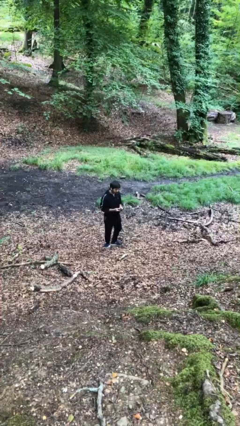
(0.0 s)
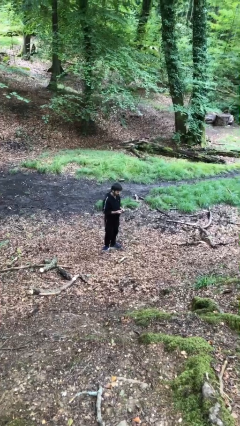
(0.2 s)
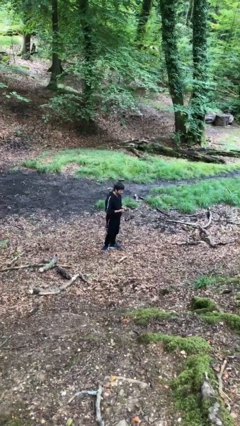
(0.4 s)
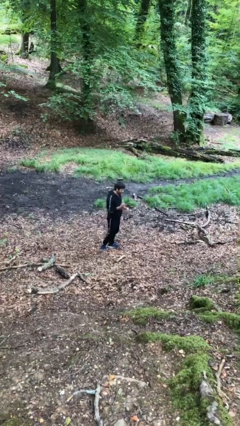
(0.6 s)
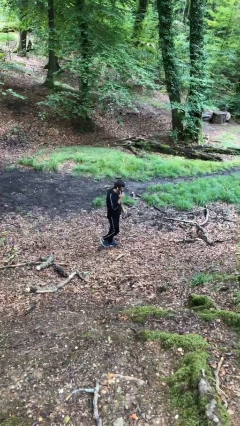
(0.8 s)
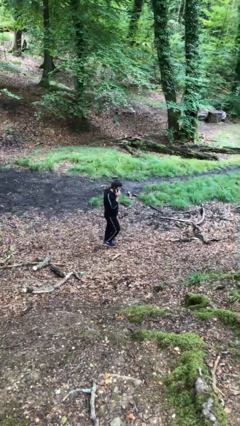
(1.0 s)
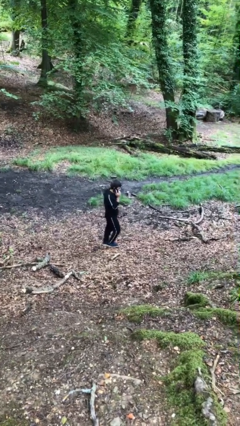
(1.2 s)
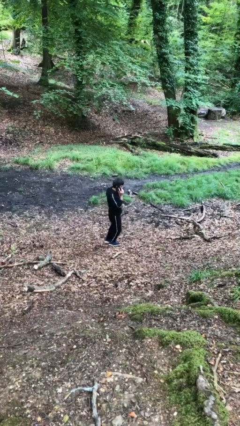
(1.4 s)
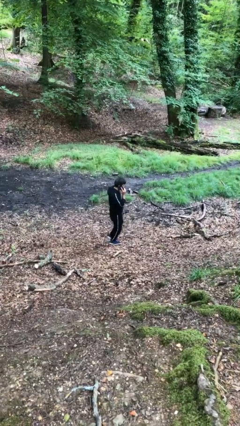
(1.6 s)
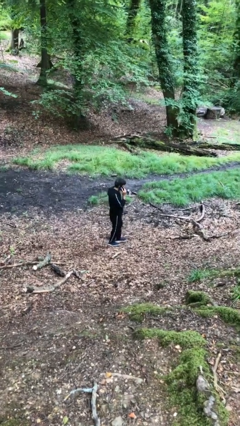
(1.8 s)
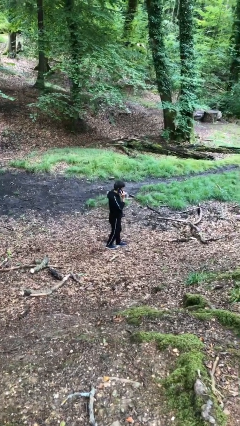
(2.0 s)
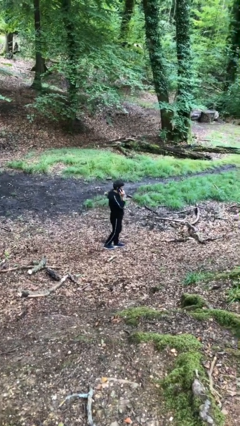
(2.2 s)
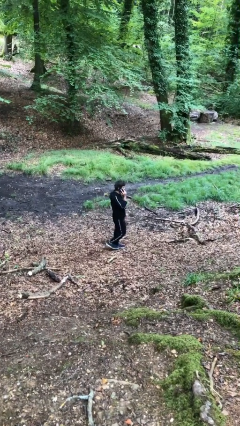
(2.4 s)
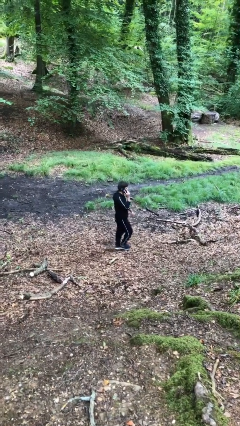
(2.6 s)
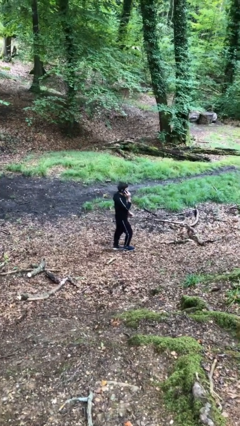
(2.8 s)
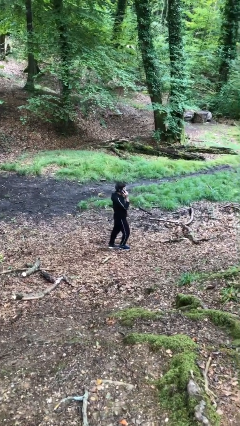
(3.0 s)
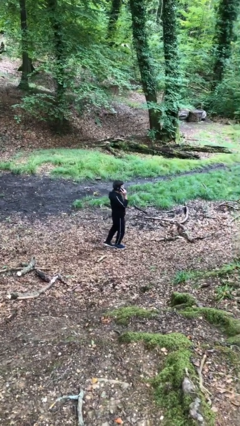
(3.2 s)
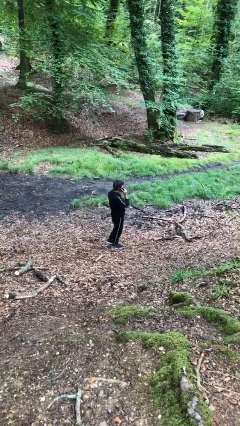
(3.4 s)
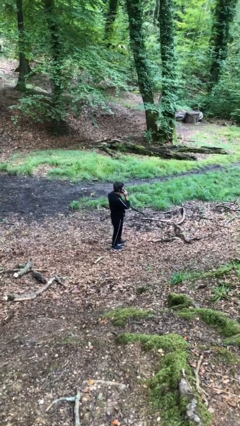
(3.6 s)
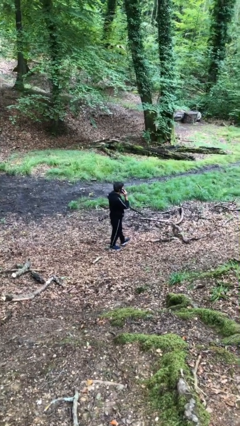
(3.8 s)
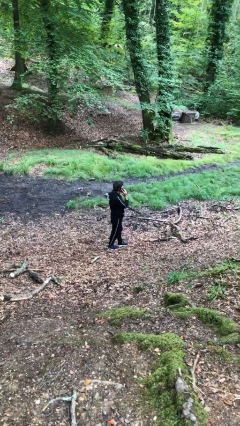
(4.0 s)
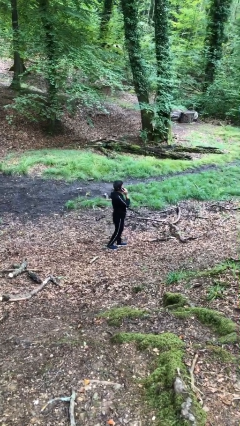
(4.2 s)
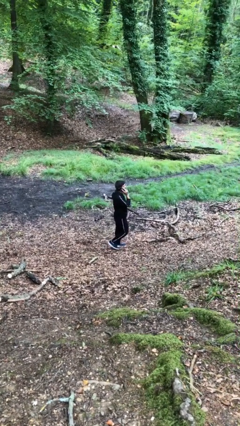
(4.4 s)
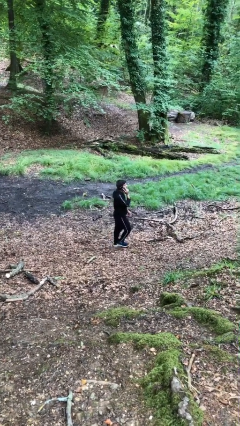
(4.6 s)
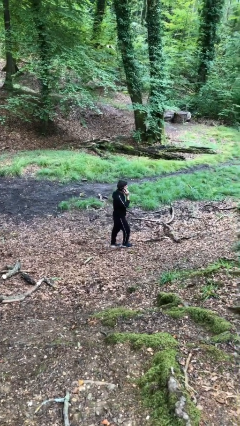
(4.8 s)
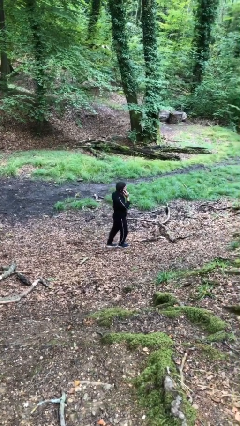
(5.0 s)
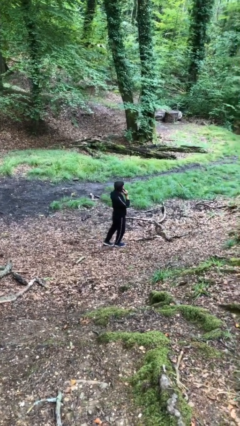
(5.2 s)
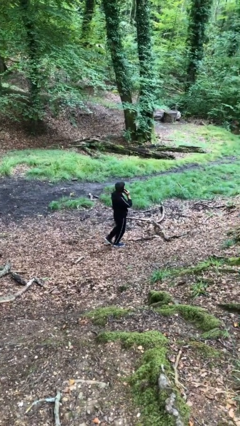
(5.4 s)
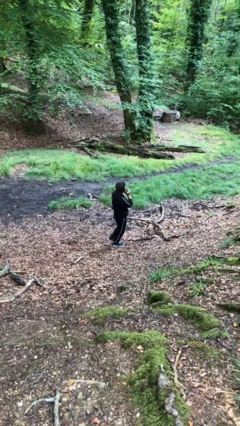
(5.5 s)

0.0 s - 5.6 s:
person talks on phone

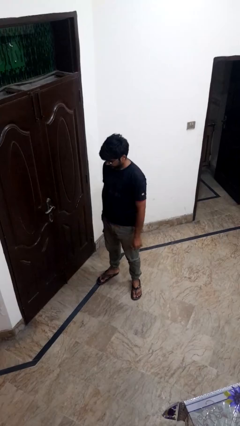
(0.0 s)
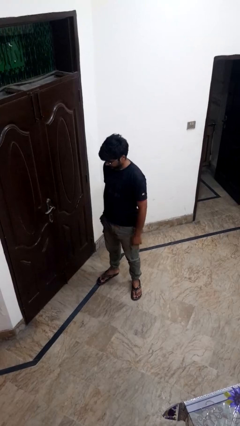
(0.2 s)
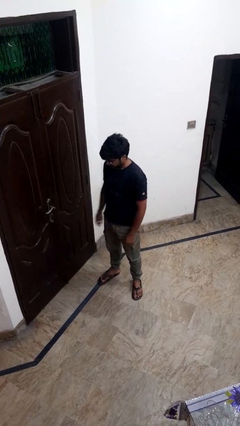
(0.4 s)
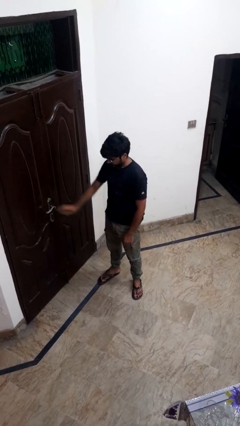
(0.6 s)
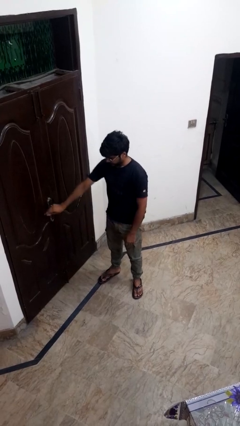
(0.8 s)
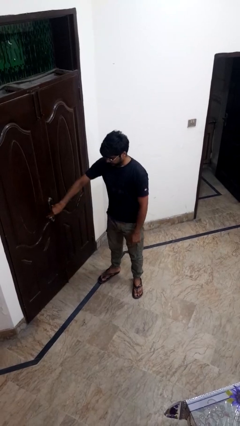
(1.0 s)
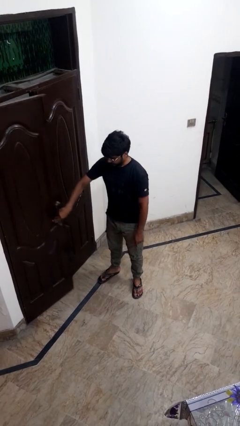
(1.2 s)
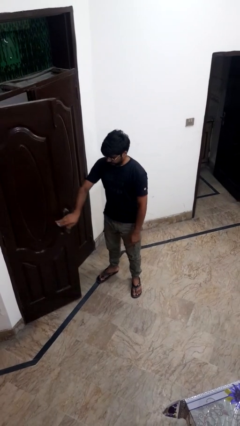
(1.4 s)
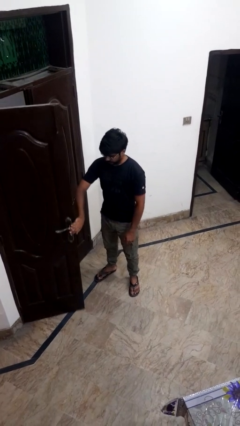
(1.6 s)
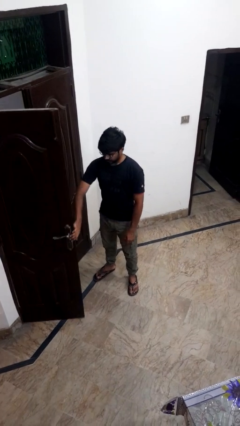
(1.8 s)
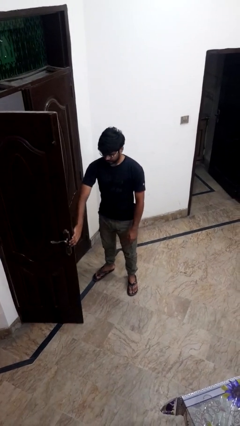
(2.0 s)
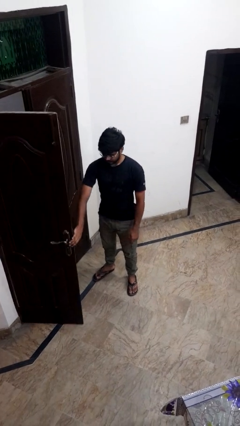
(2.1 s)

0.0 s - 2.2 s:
person opens facility door

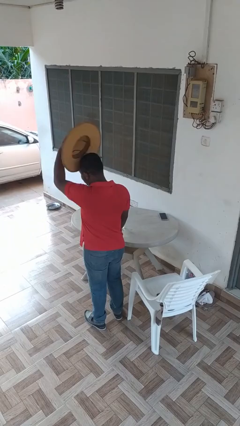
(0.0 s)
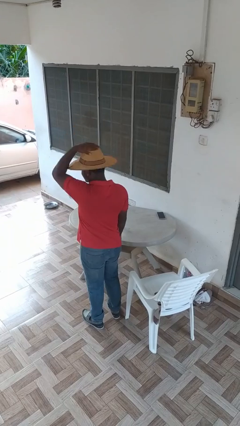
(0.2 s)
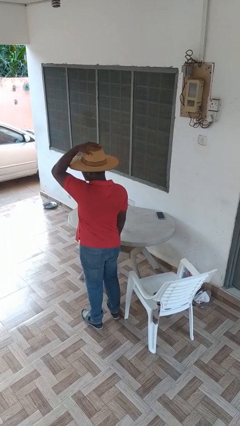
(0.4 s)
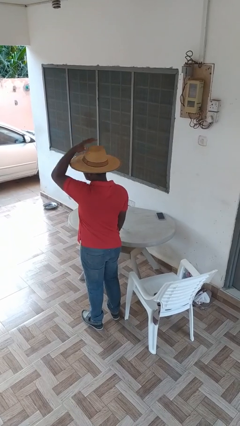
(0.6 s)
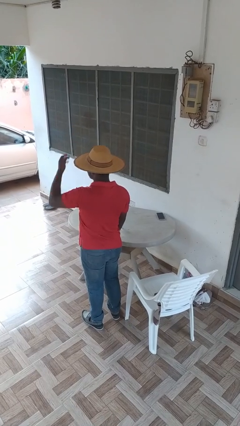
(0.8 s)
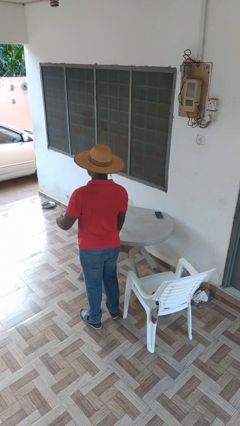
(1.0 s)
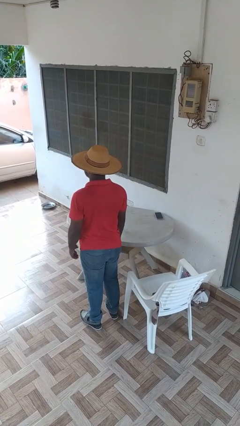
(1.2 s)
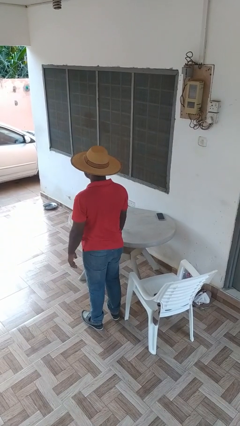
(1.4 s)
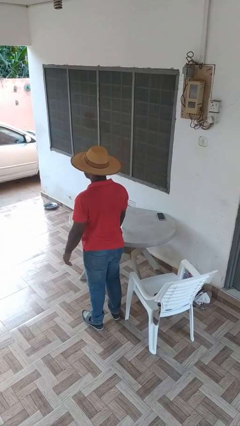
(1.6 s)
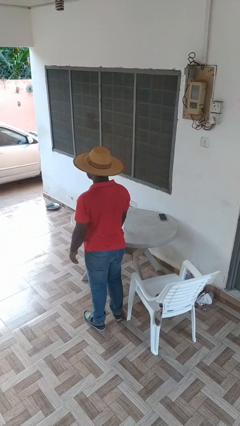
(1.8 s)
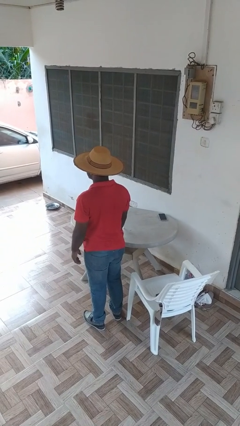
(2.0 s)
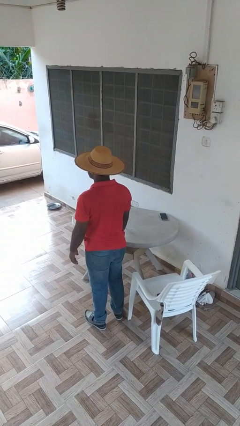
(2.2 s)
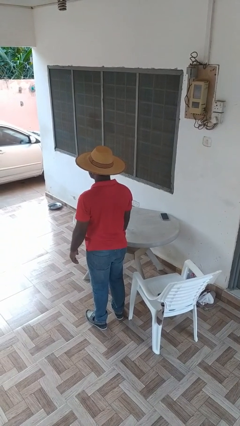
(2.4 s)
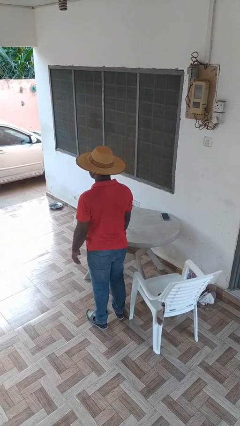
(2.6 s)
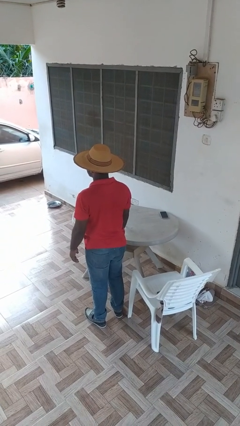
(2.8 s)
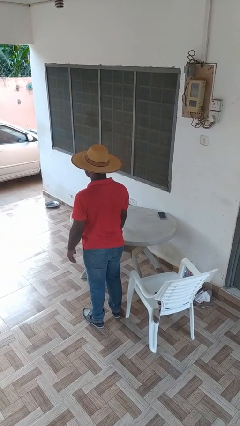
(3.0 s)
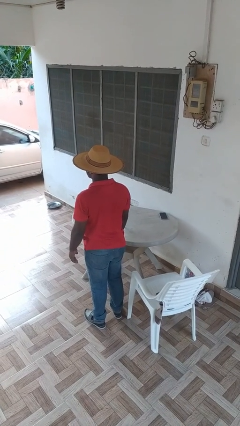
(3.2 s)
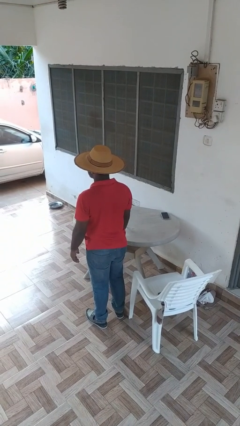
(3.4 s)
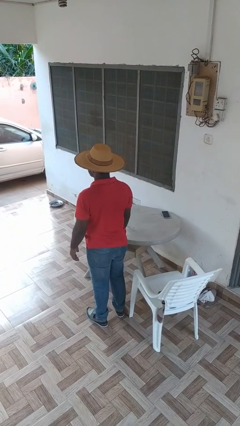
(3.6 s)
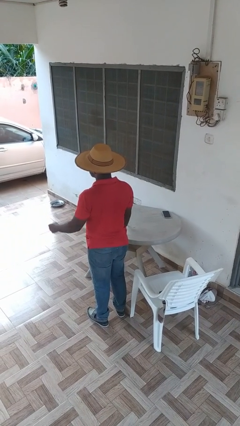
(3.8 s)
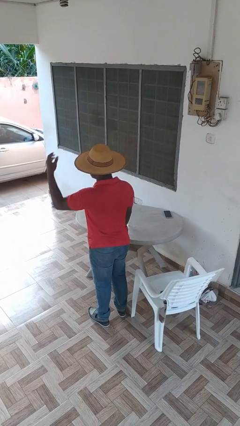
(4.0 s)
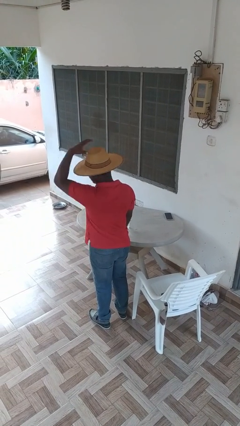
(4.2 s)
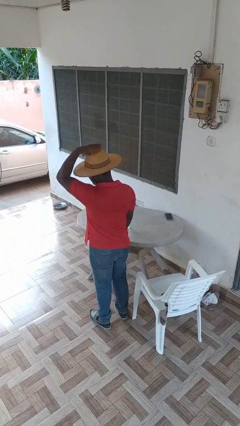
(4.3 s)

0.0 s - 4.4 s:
person puts on hat

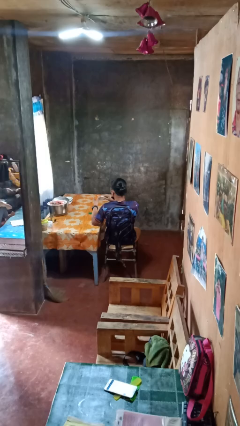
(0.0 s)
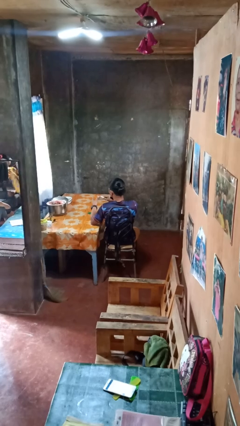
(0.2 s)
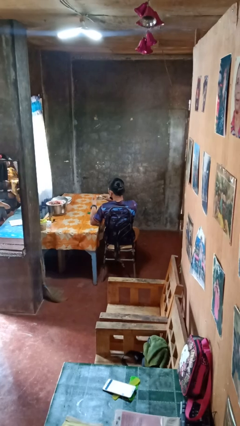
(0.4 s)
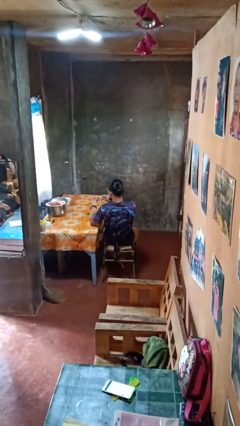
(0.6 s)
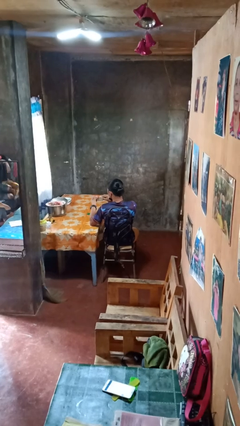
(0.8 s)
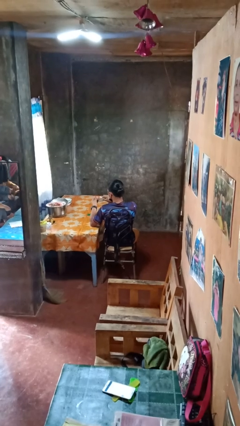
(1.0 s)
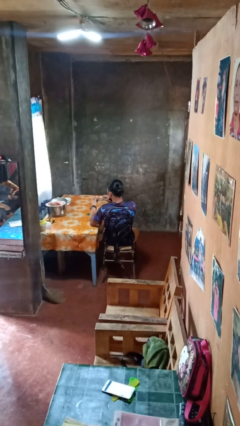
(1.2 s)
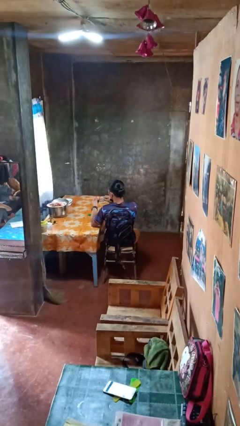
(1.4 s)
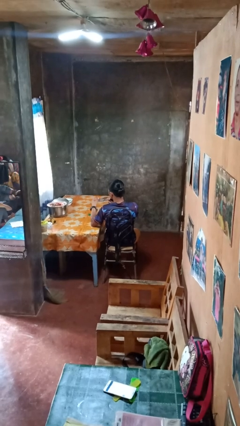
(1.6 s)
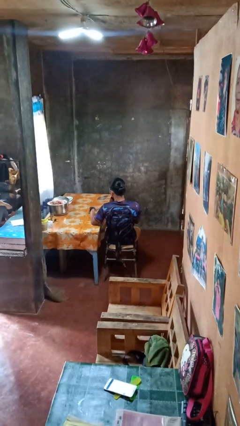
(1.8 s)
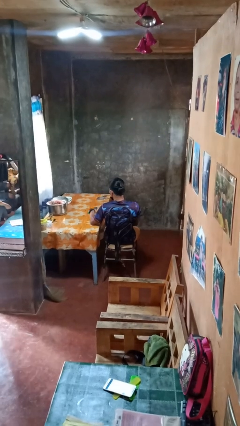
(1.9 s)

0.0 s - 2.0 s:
person files fingernails

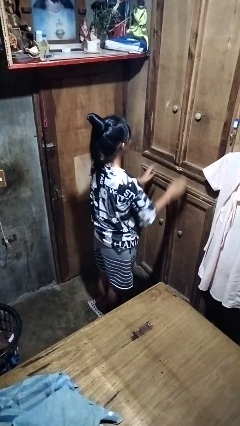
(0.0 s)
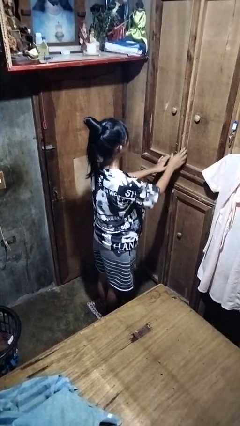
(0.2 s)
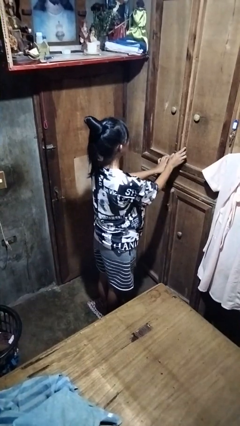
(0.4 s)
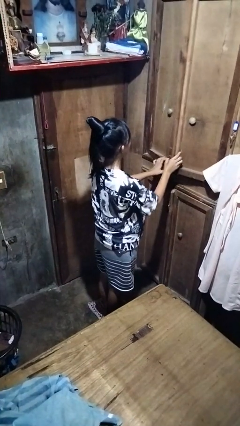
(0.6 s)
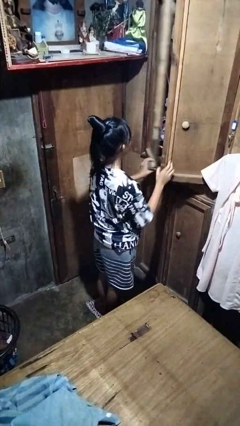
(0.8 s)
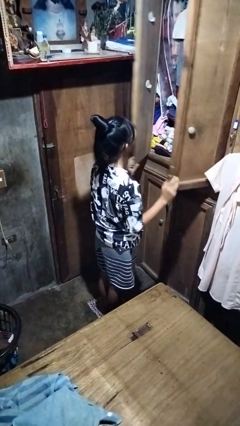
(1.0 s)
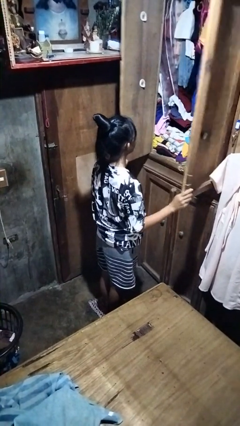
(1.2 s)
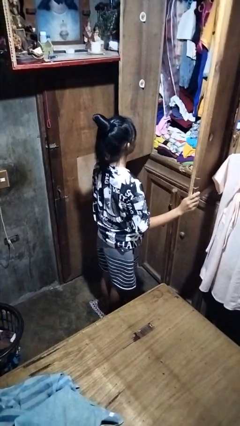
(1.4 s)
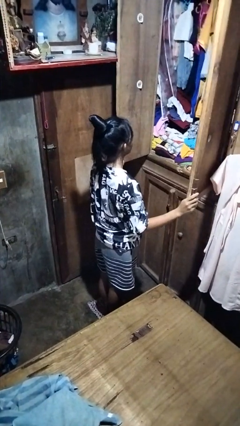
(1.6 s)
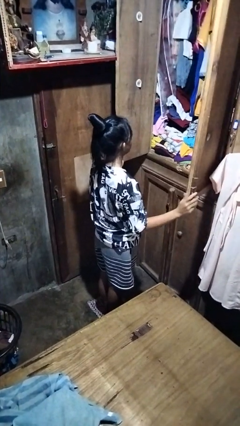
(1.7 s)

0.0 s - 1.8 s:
person opens closet door

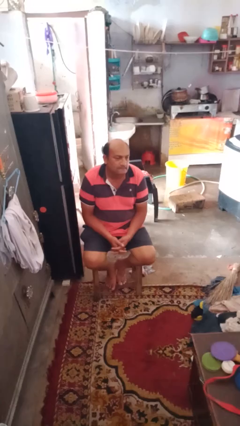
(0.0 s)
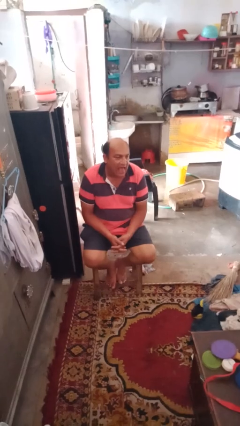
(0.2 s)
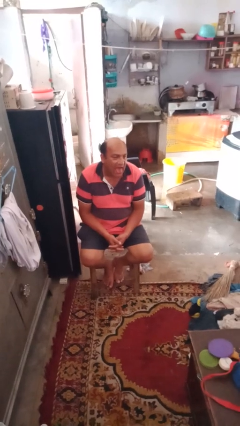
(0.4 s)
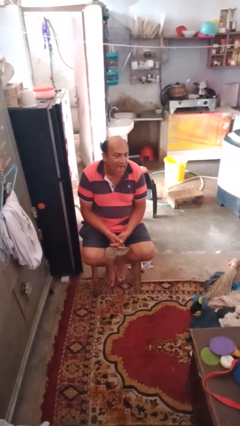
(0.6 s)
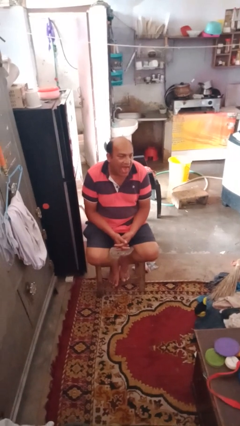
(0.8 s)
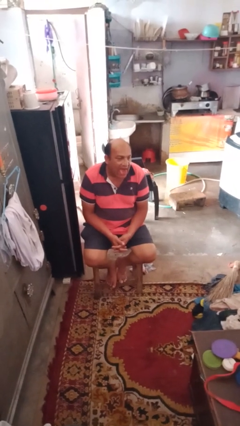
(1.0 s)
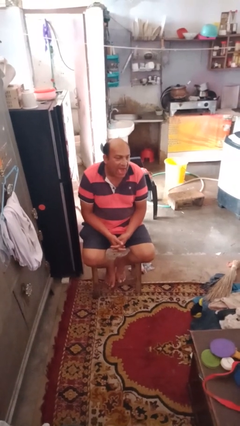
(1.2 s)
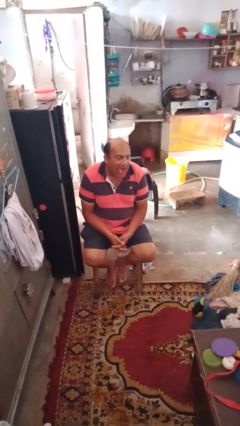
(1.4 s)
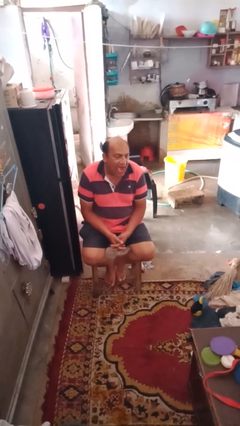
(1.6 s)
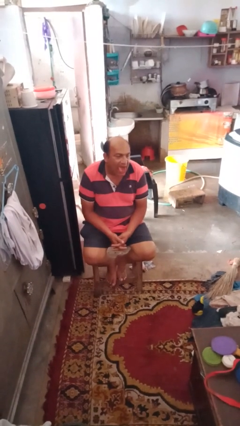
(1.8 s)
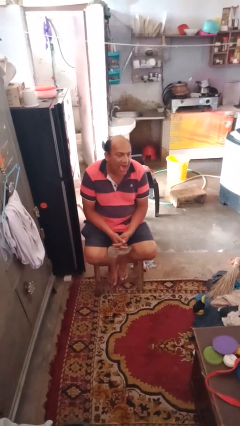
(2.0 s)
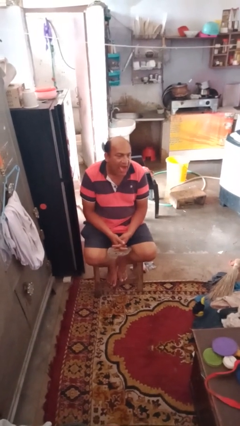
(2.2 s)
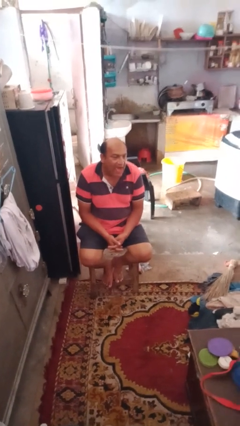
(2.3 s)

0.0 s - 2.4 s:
person sticks out tongue
